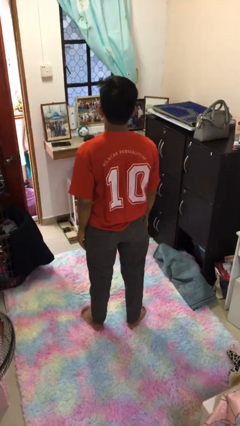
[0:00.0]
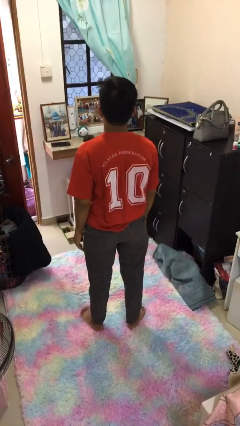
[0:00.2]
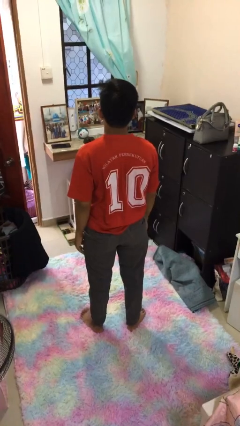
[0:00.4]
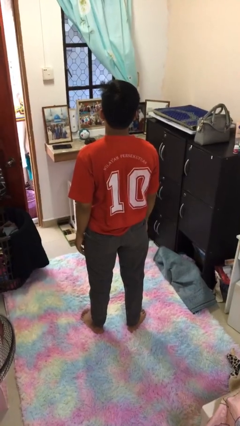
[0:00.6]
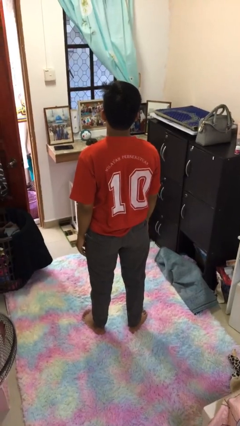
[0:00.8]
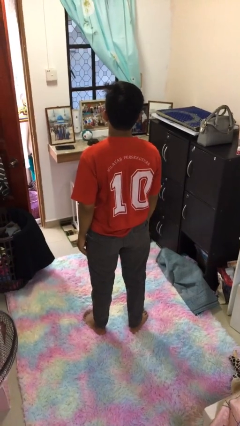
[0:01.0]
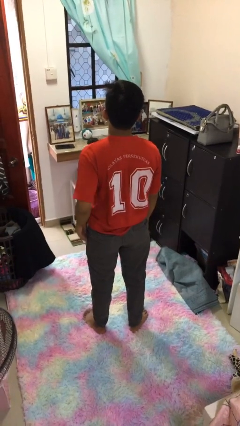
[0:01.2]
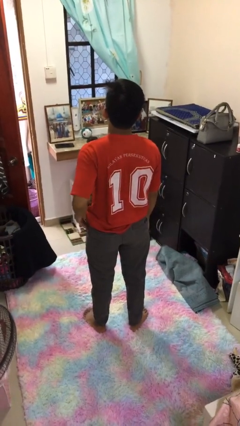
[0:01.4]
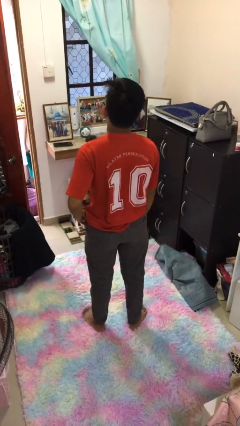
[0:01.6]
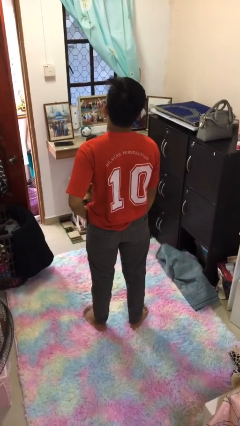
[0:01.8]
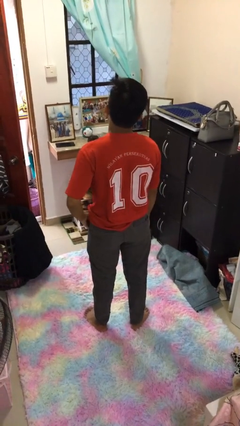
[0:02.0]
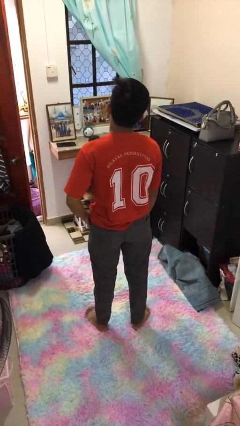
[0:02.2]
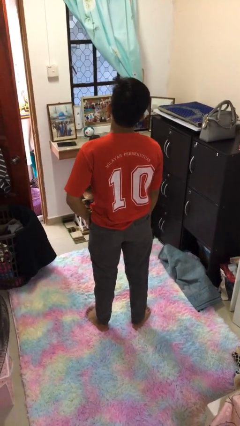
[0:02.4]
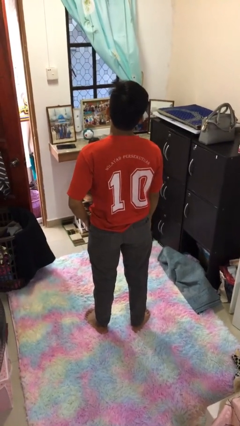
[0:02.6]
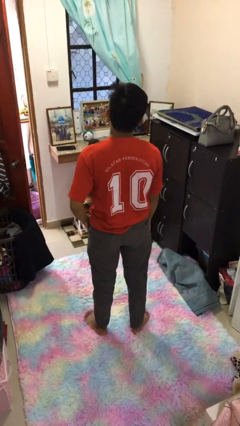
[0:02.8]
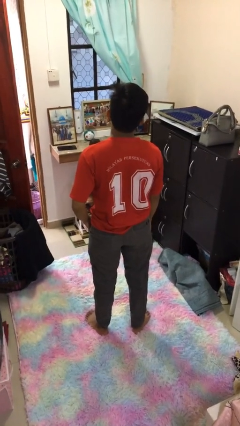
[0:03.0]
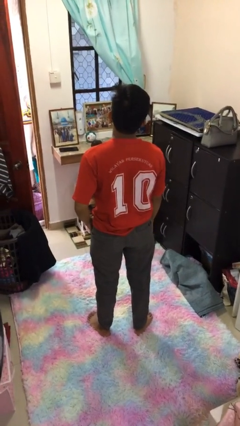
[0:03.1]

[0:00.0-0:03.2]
person puts hands in back pockets

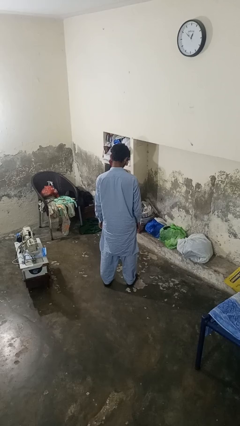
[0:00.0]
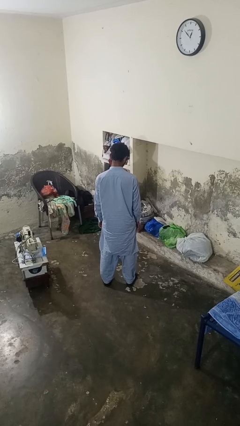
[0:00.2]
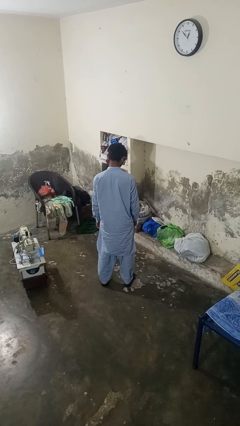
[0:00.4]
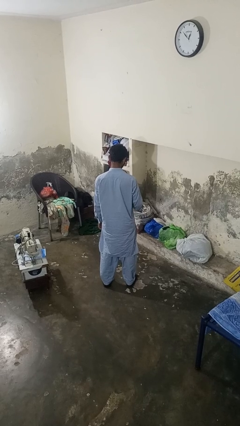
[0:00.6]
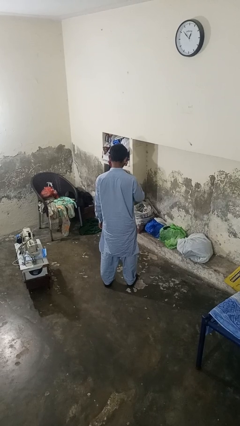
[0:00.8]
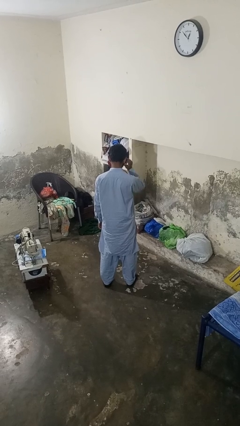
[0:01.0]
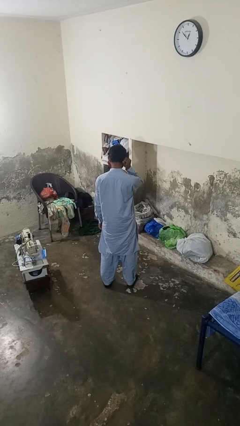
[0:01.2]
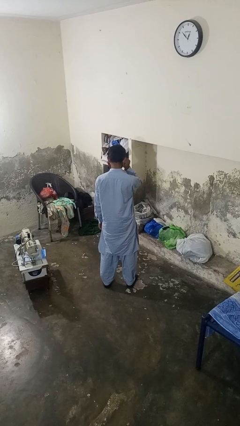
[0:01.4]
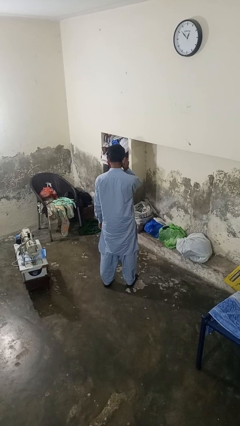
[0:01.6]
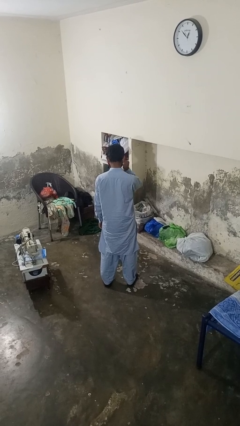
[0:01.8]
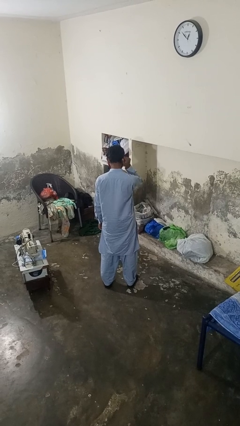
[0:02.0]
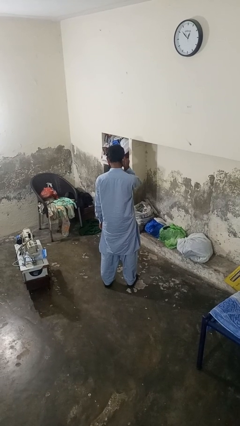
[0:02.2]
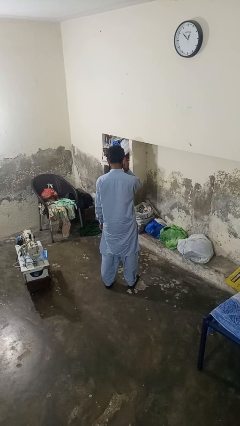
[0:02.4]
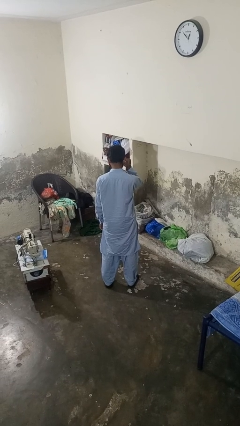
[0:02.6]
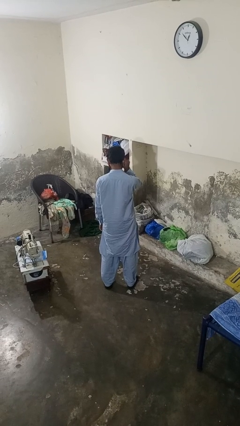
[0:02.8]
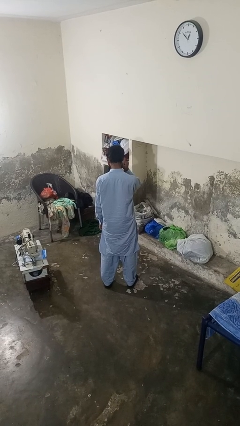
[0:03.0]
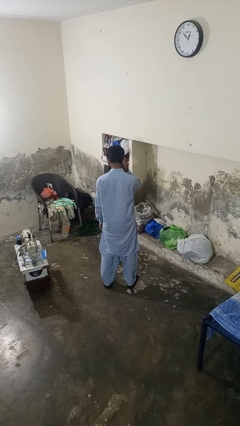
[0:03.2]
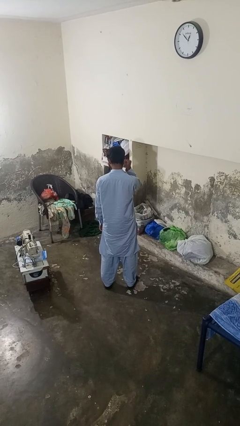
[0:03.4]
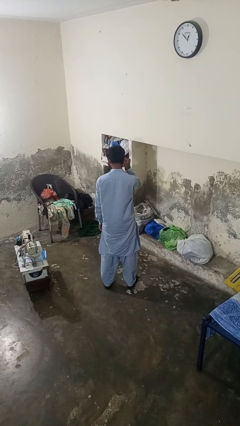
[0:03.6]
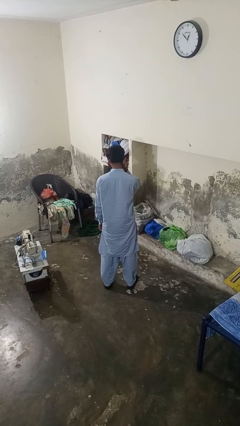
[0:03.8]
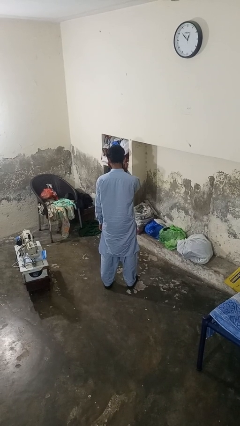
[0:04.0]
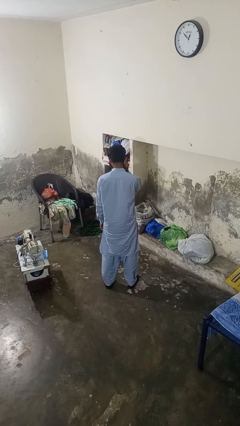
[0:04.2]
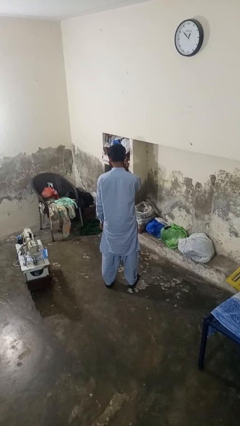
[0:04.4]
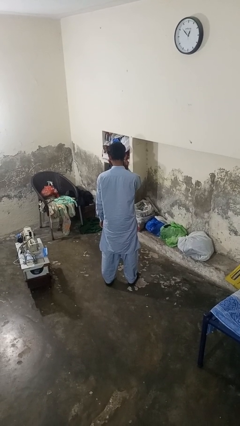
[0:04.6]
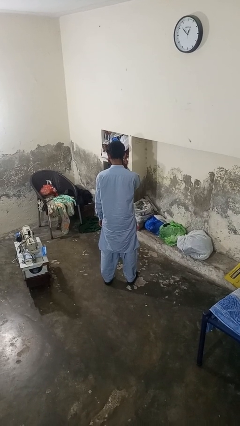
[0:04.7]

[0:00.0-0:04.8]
person touches earlobe

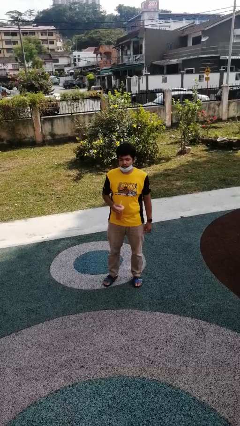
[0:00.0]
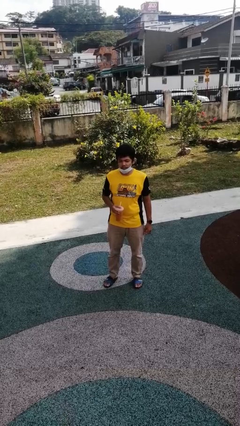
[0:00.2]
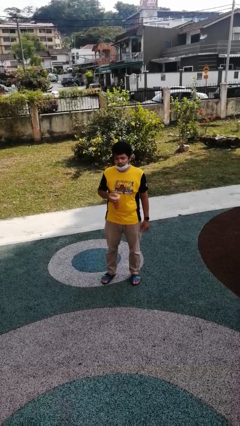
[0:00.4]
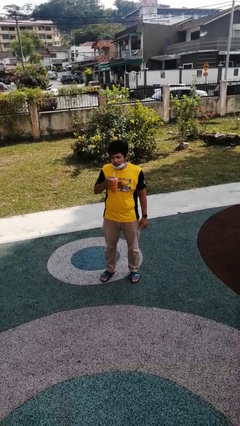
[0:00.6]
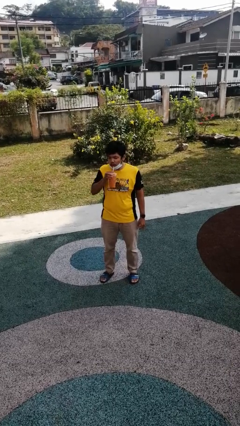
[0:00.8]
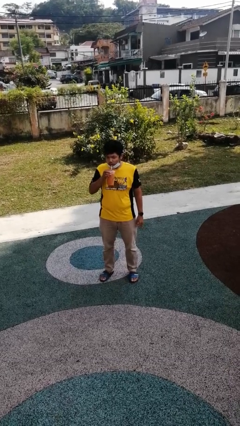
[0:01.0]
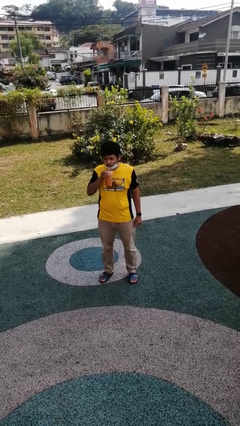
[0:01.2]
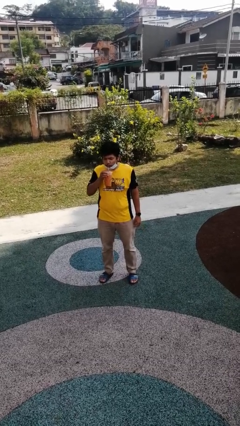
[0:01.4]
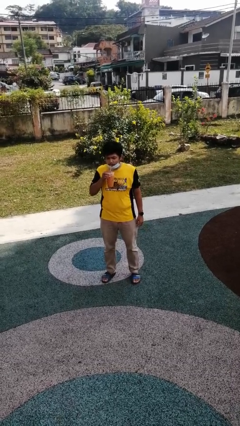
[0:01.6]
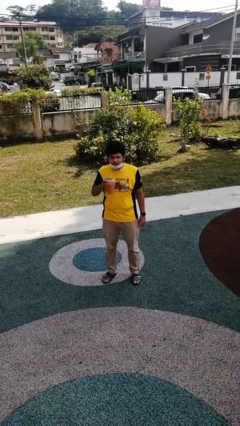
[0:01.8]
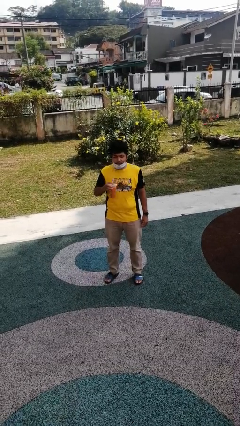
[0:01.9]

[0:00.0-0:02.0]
person drinks from straw

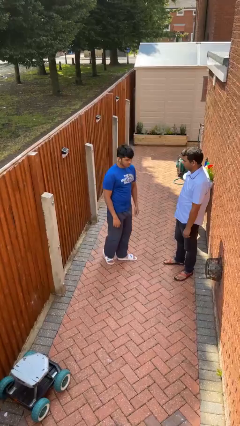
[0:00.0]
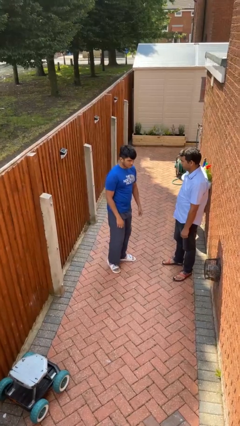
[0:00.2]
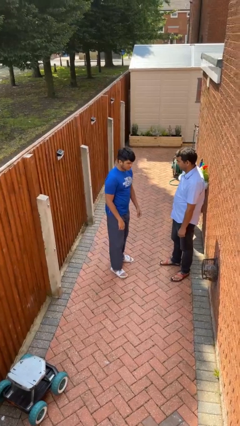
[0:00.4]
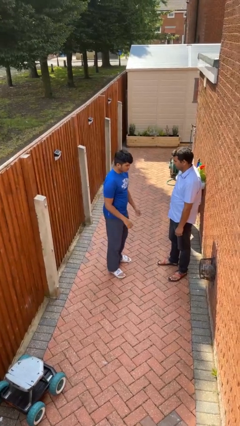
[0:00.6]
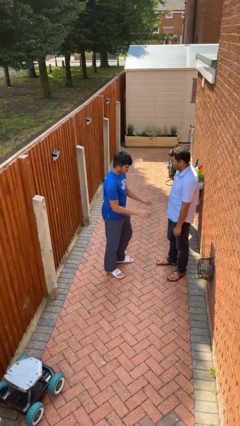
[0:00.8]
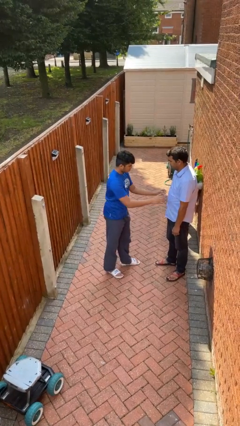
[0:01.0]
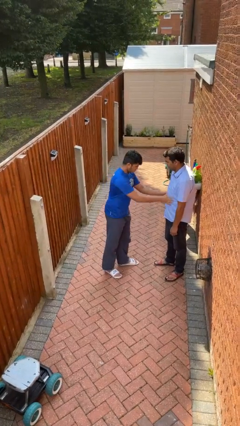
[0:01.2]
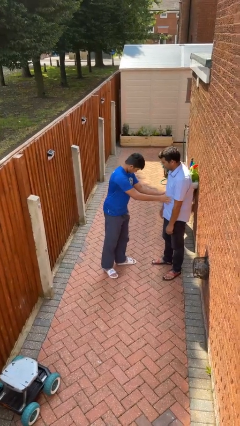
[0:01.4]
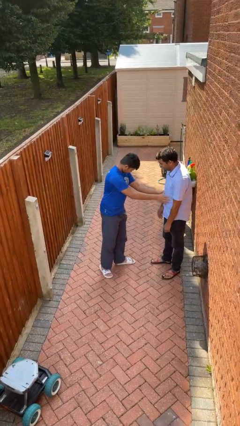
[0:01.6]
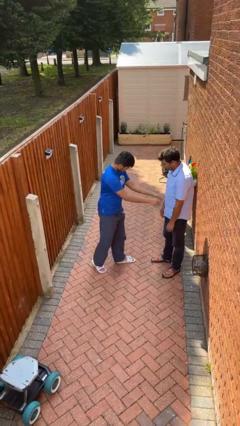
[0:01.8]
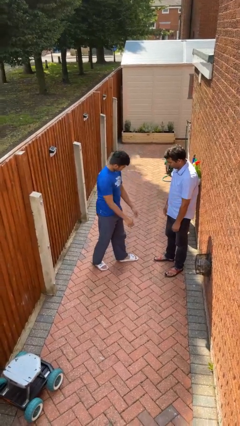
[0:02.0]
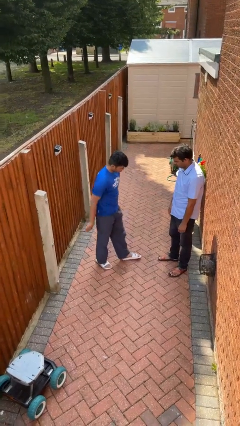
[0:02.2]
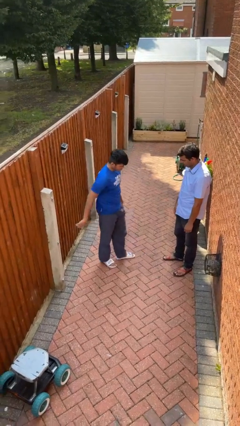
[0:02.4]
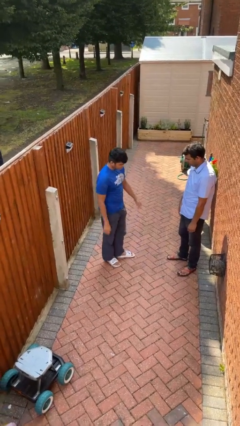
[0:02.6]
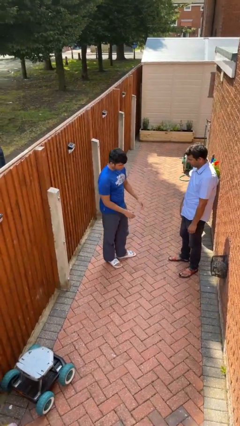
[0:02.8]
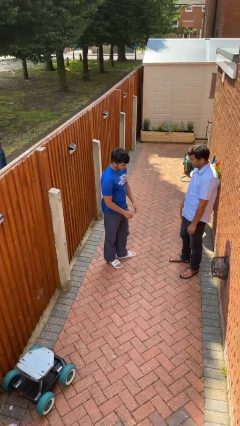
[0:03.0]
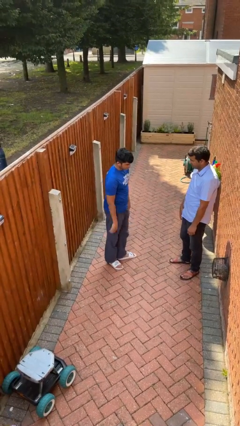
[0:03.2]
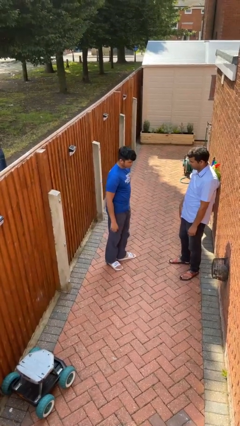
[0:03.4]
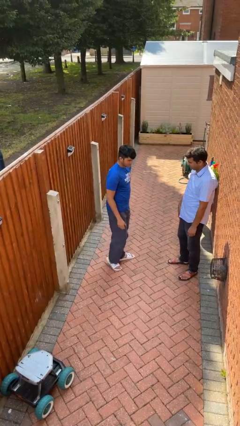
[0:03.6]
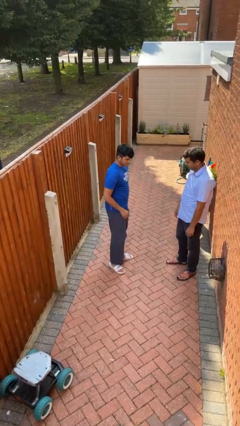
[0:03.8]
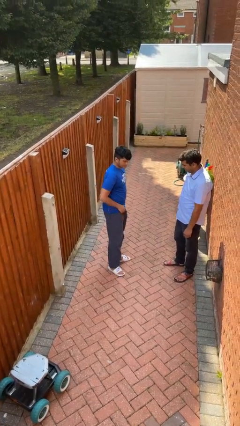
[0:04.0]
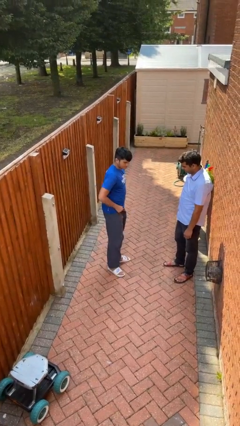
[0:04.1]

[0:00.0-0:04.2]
person shoves person

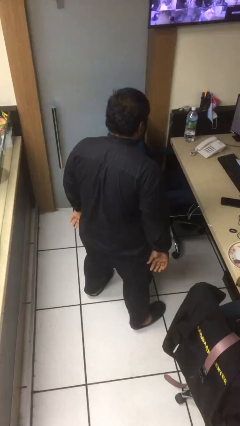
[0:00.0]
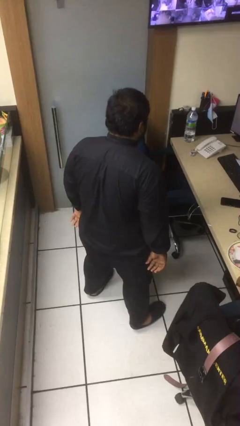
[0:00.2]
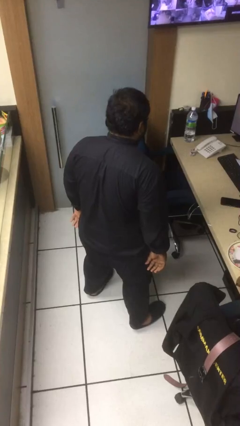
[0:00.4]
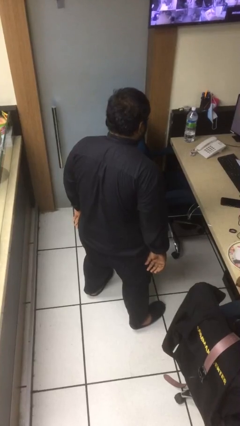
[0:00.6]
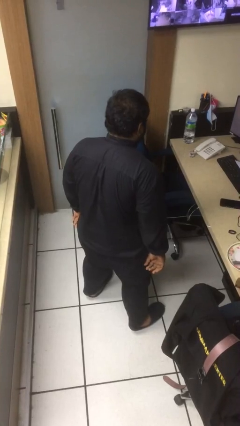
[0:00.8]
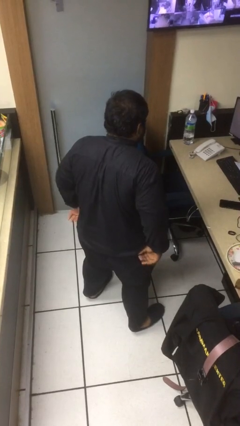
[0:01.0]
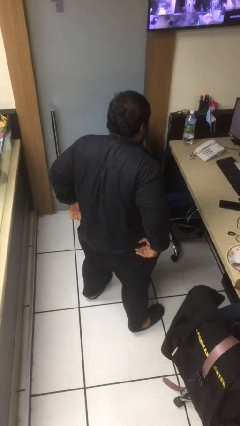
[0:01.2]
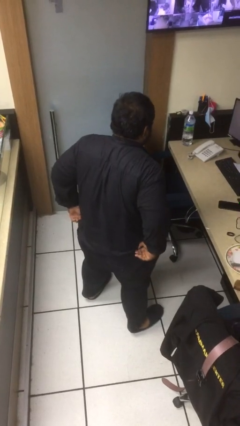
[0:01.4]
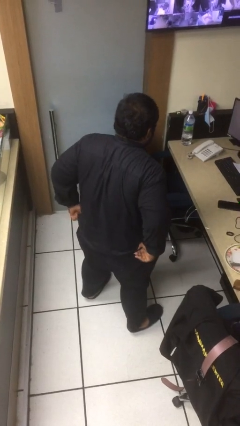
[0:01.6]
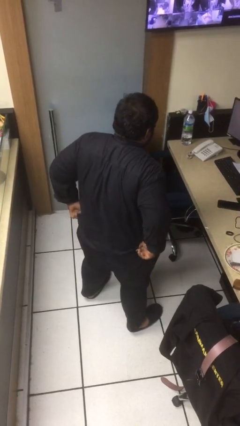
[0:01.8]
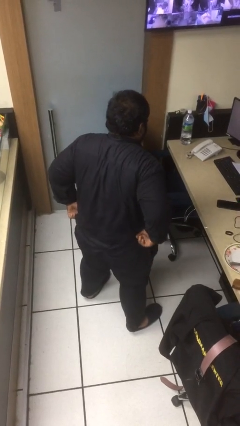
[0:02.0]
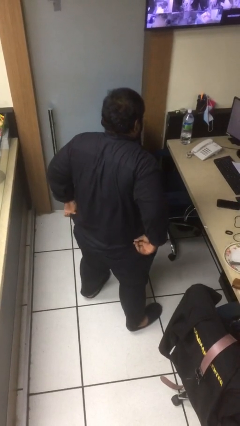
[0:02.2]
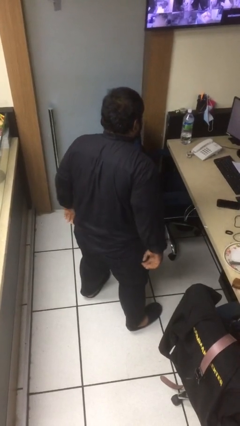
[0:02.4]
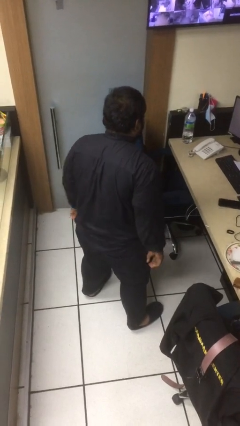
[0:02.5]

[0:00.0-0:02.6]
person hikes up pants

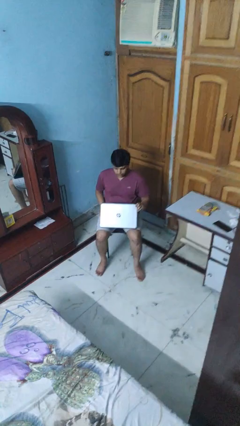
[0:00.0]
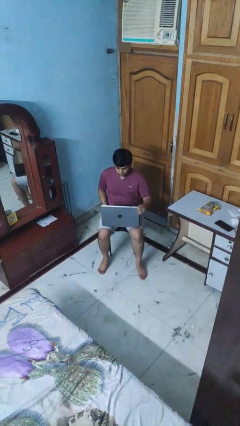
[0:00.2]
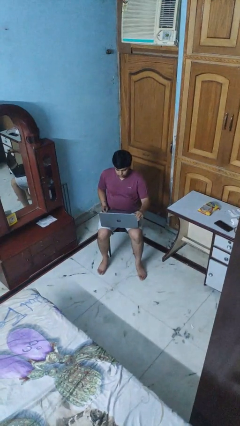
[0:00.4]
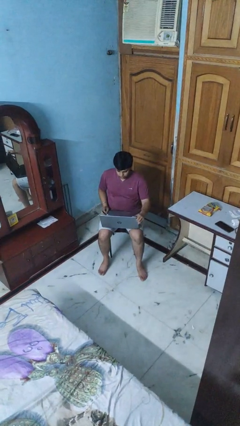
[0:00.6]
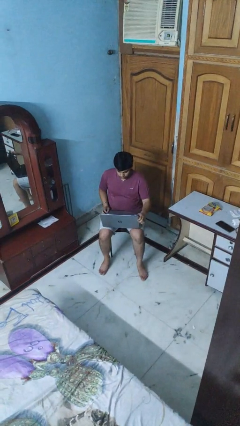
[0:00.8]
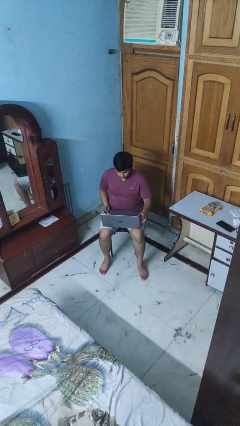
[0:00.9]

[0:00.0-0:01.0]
person opens laptop
